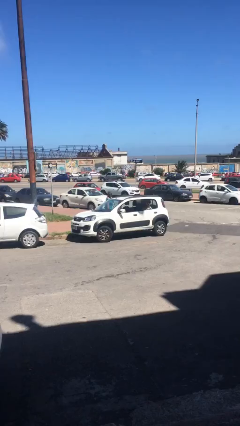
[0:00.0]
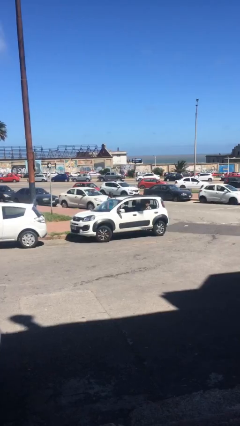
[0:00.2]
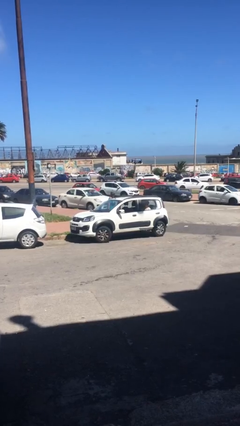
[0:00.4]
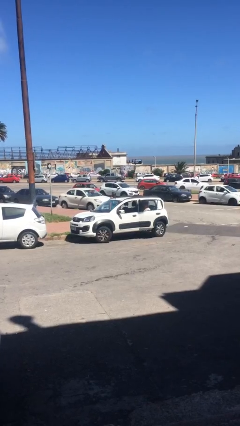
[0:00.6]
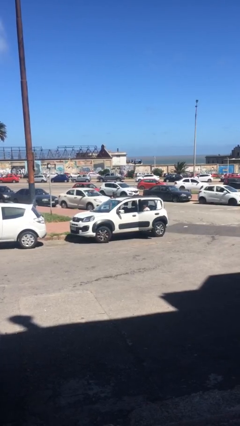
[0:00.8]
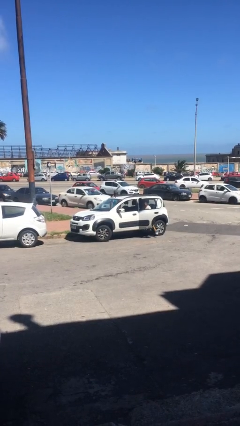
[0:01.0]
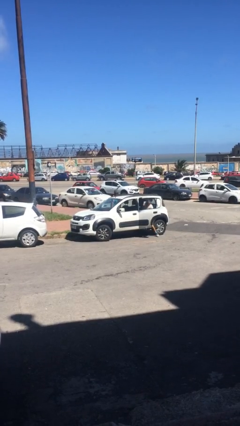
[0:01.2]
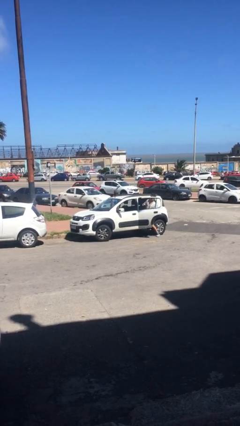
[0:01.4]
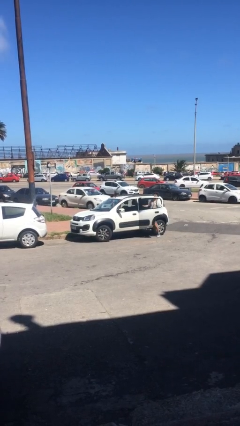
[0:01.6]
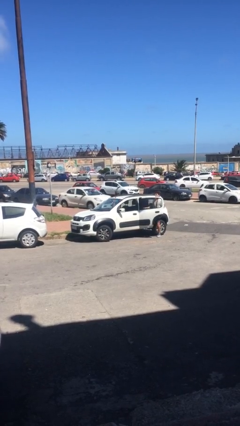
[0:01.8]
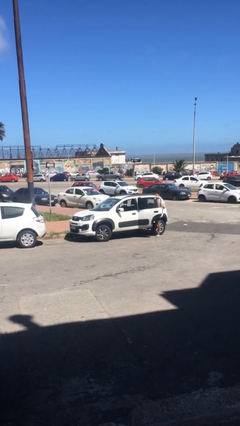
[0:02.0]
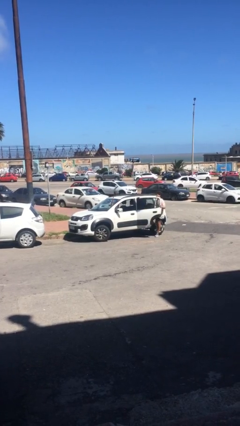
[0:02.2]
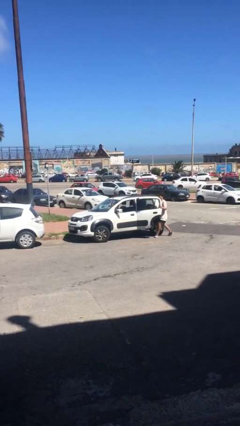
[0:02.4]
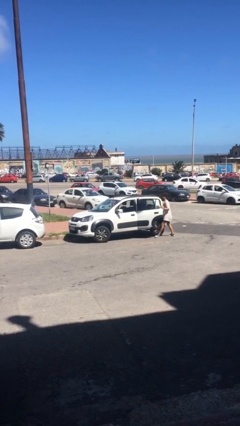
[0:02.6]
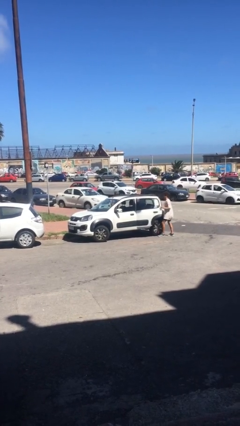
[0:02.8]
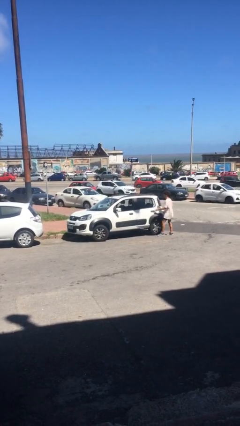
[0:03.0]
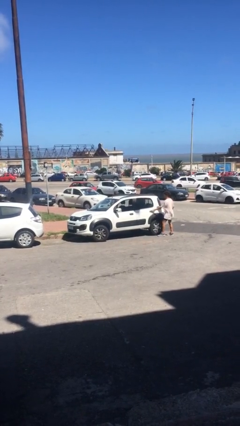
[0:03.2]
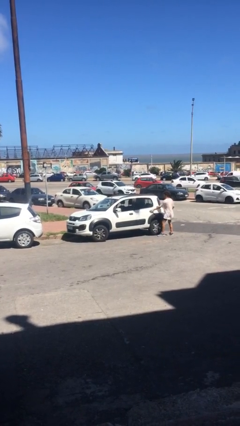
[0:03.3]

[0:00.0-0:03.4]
car drops off person

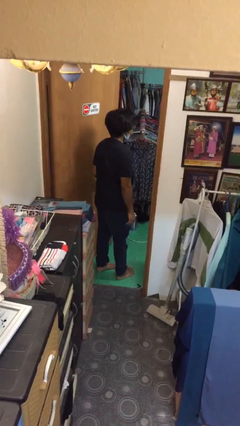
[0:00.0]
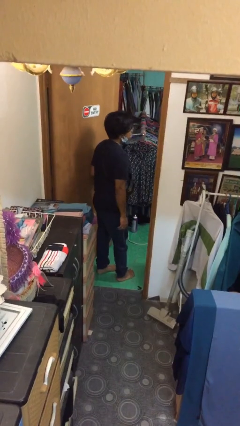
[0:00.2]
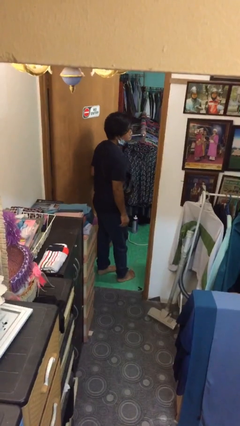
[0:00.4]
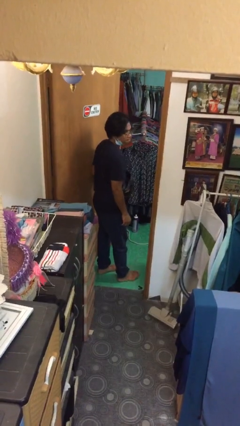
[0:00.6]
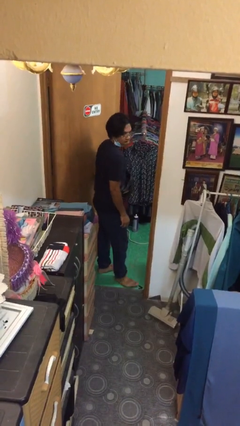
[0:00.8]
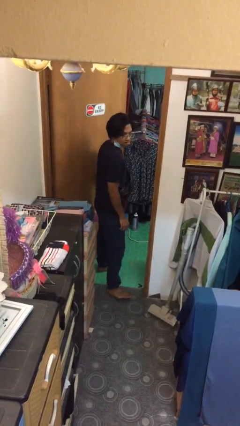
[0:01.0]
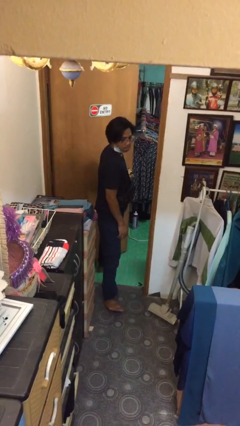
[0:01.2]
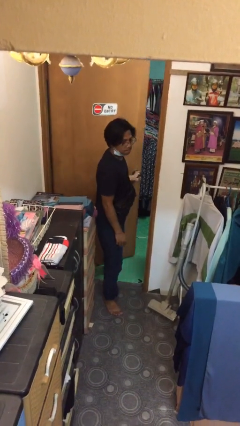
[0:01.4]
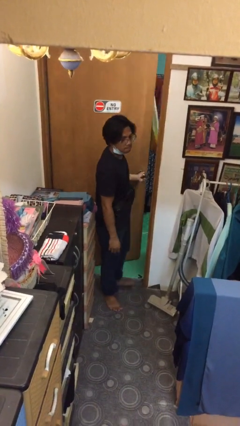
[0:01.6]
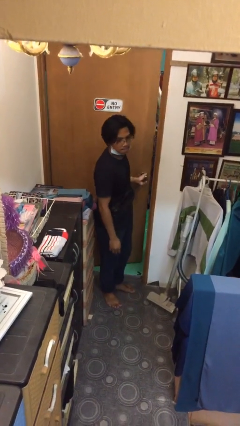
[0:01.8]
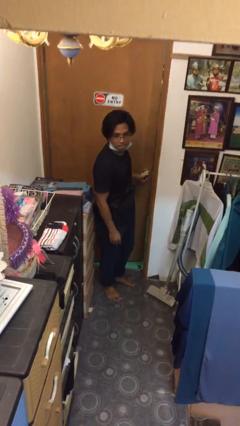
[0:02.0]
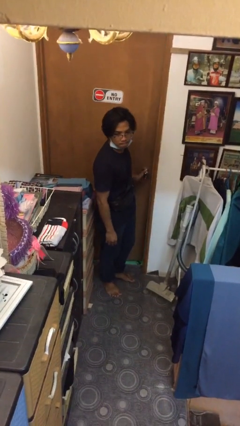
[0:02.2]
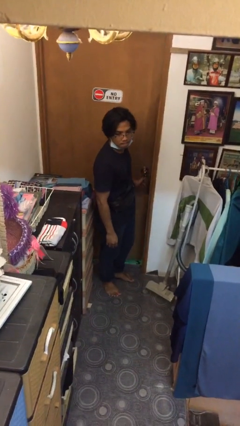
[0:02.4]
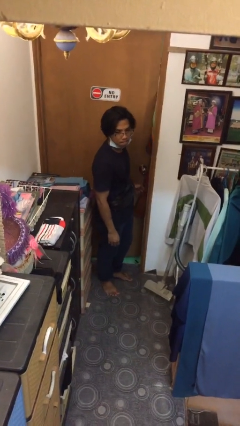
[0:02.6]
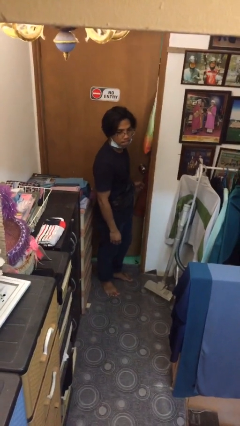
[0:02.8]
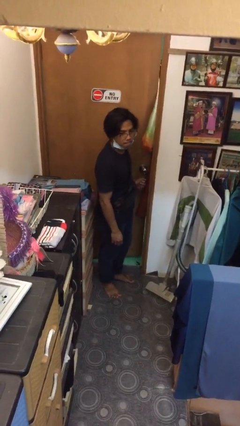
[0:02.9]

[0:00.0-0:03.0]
person closes facility door

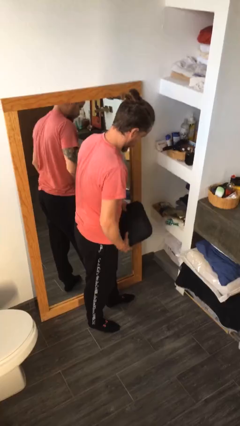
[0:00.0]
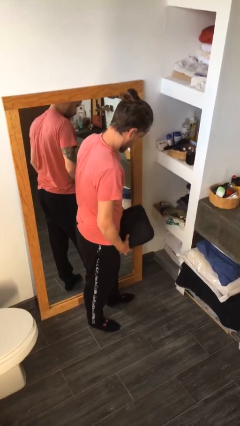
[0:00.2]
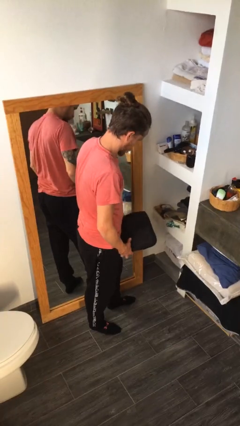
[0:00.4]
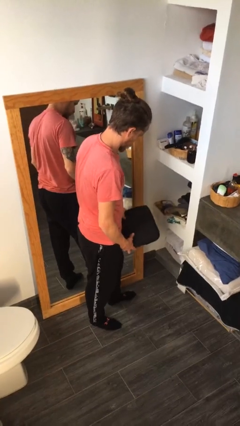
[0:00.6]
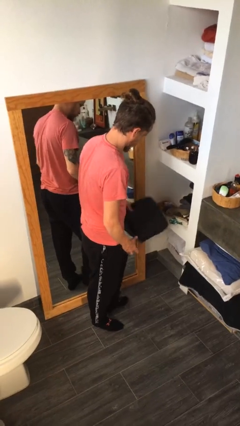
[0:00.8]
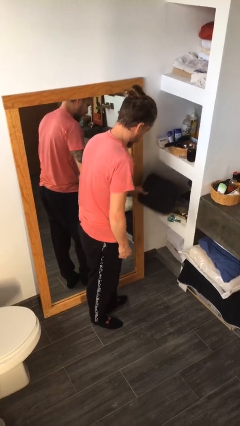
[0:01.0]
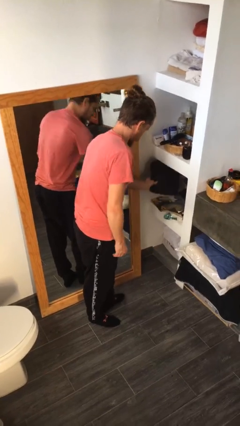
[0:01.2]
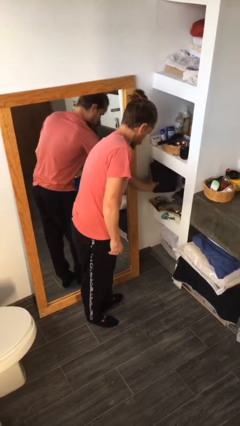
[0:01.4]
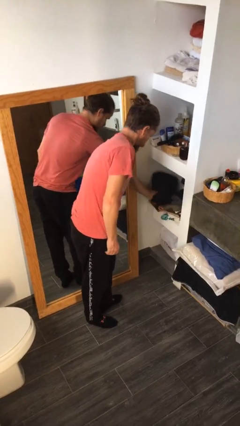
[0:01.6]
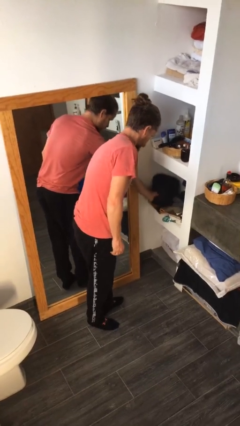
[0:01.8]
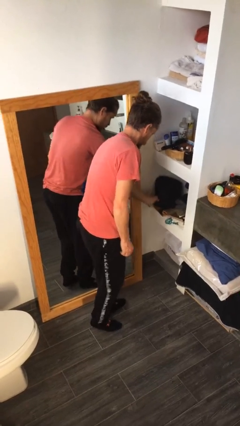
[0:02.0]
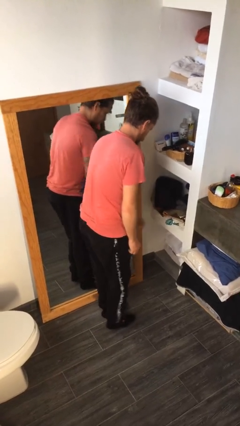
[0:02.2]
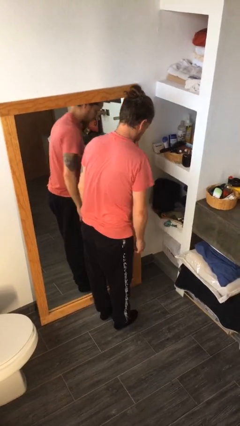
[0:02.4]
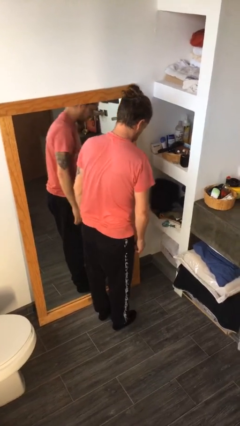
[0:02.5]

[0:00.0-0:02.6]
person puts down object into cabinet

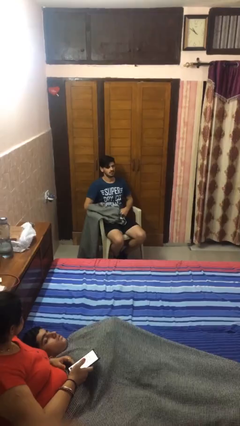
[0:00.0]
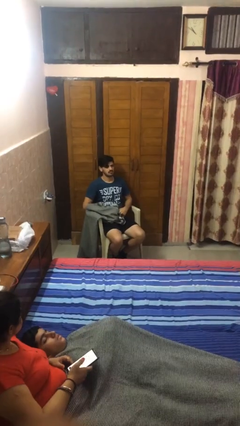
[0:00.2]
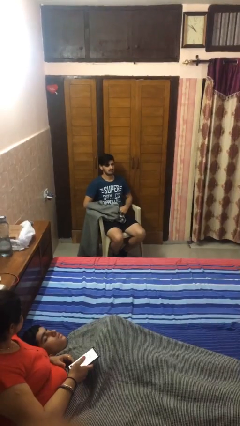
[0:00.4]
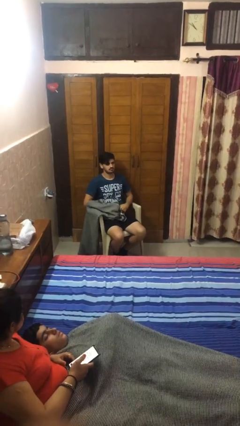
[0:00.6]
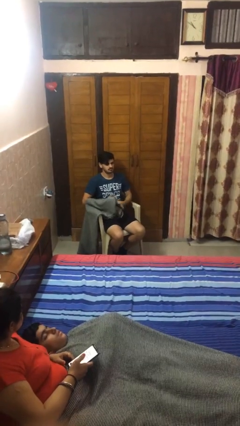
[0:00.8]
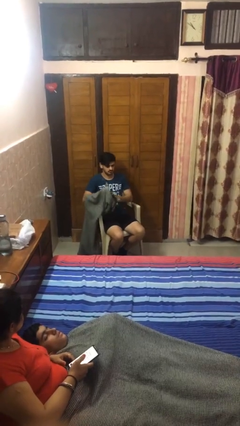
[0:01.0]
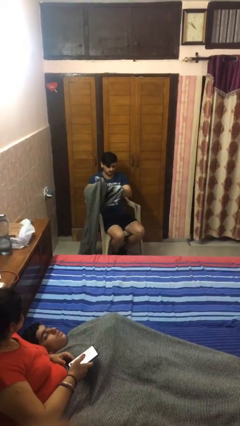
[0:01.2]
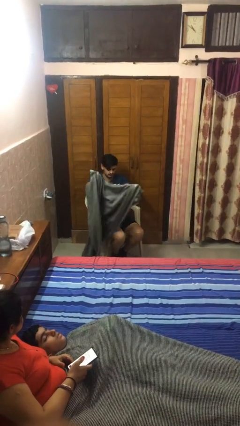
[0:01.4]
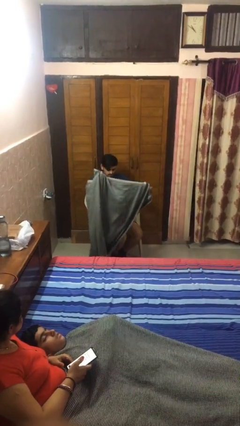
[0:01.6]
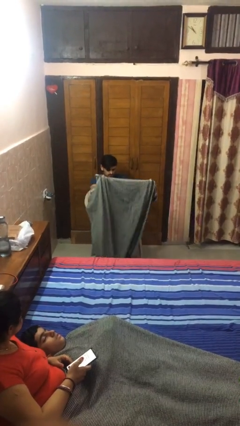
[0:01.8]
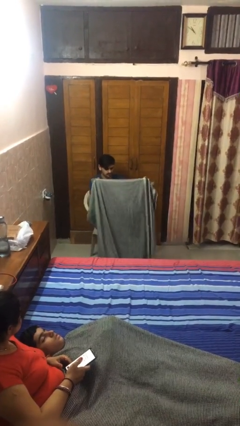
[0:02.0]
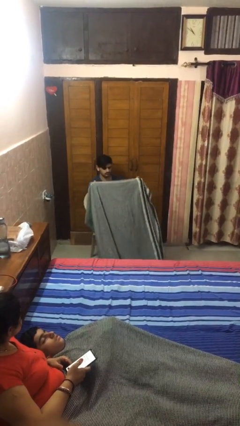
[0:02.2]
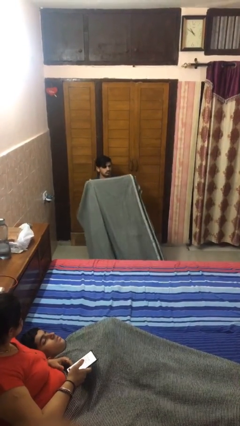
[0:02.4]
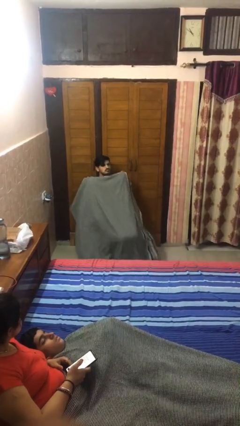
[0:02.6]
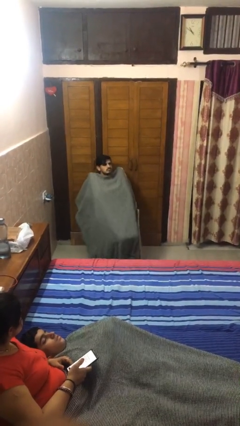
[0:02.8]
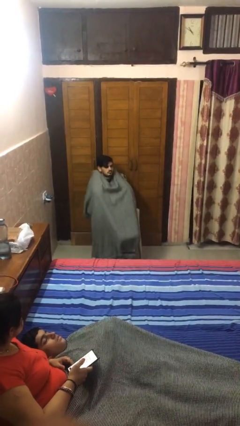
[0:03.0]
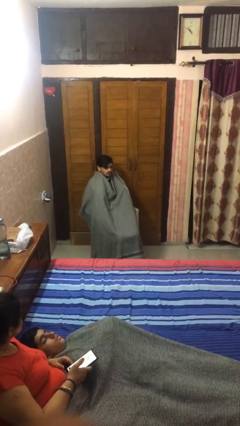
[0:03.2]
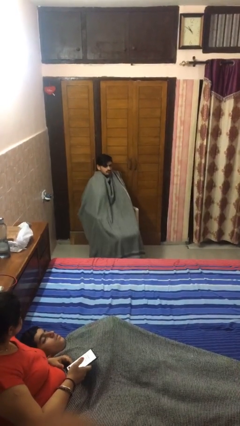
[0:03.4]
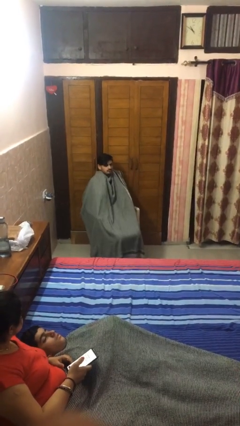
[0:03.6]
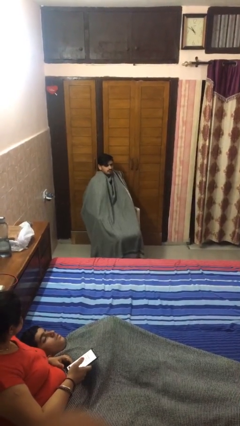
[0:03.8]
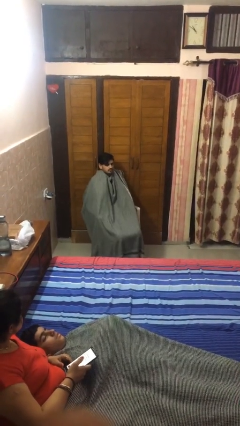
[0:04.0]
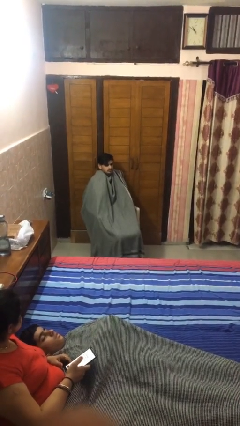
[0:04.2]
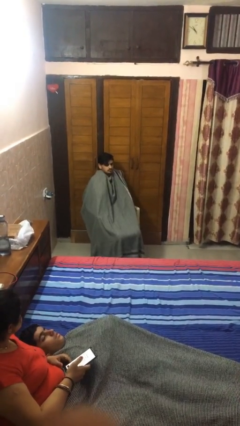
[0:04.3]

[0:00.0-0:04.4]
person covers with blanket

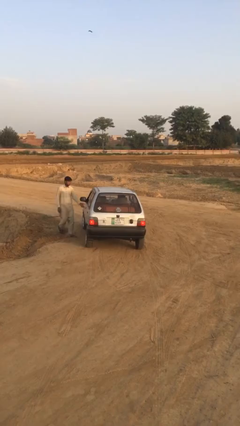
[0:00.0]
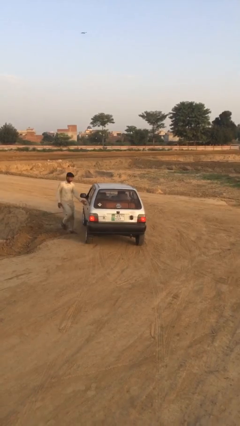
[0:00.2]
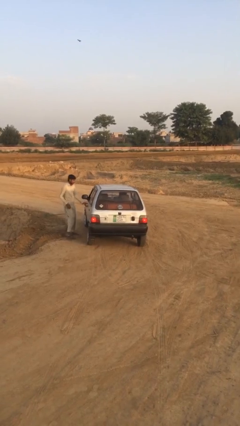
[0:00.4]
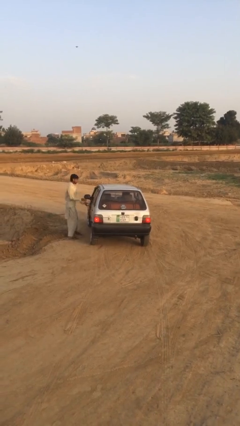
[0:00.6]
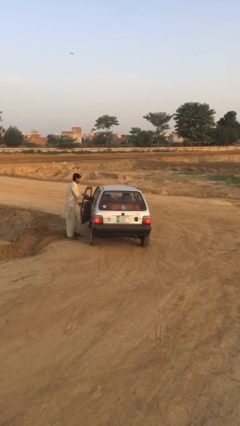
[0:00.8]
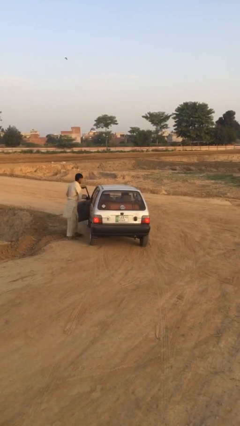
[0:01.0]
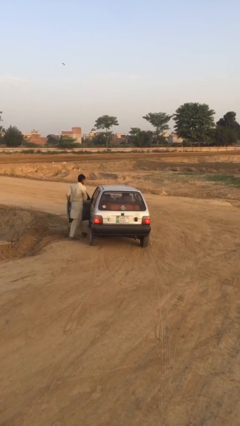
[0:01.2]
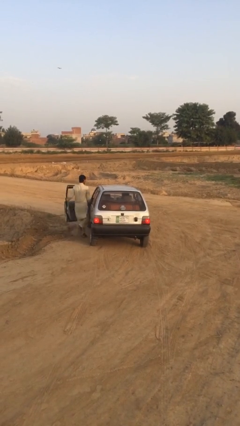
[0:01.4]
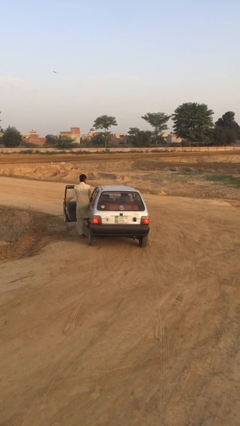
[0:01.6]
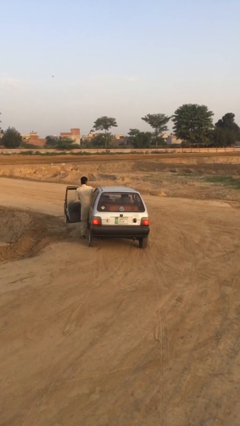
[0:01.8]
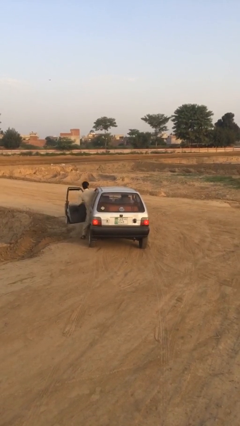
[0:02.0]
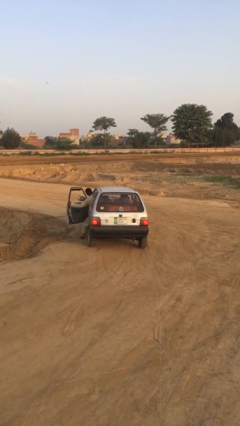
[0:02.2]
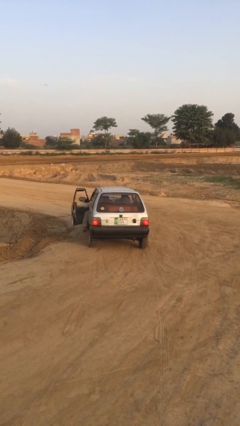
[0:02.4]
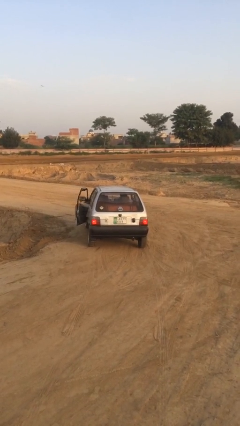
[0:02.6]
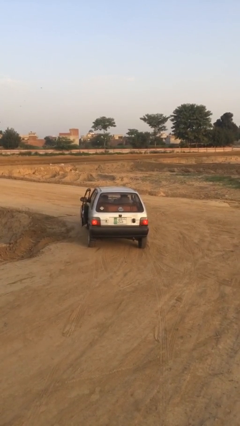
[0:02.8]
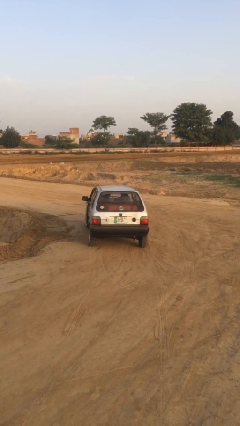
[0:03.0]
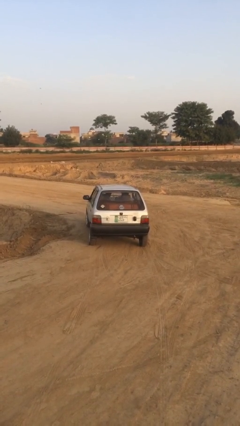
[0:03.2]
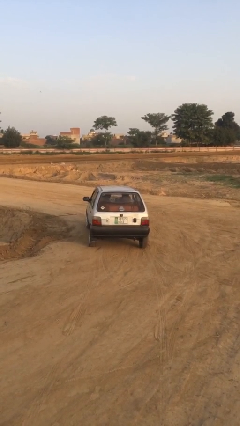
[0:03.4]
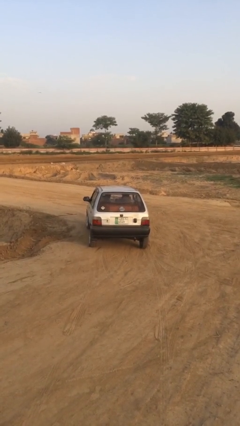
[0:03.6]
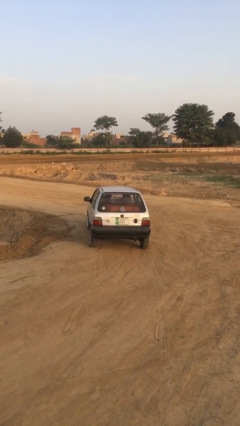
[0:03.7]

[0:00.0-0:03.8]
car picks up person

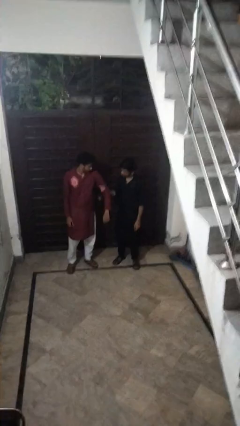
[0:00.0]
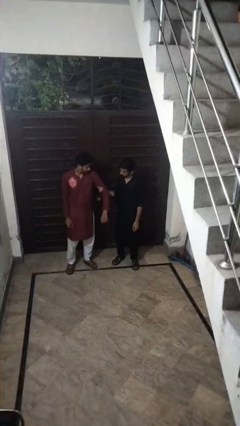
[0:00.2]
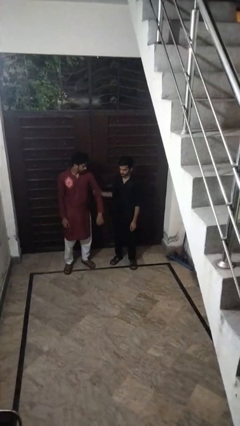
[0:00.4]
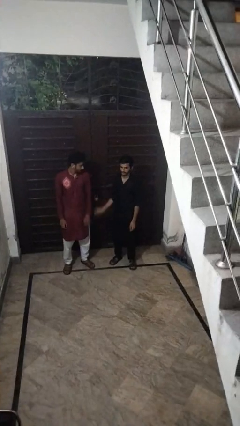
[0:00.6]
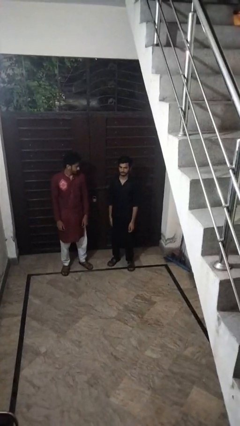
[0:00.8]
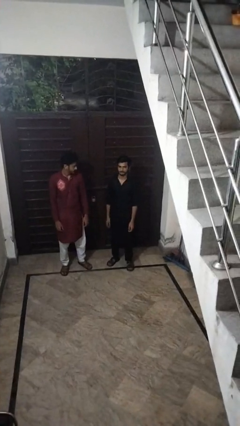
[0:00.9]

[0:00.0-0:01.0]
person grabs person by bicep
